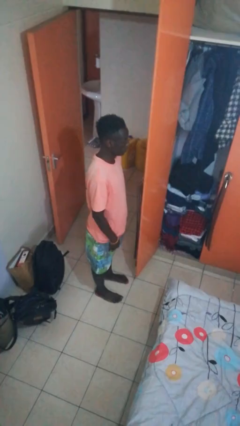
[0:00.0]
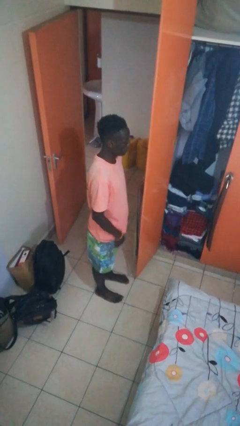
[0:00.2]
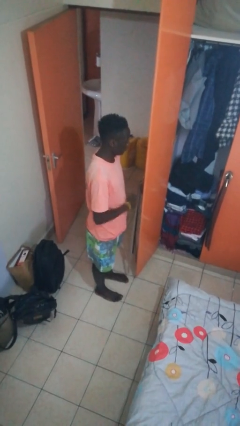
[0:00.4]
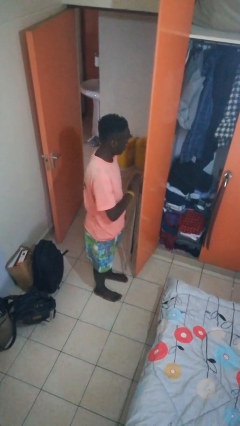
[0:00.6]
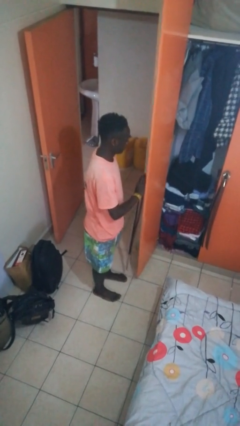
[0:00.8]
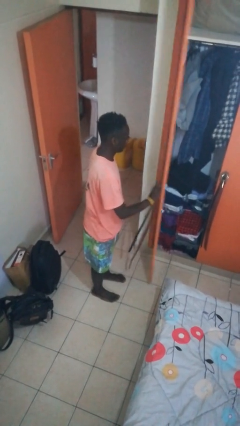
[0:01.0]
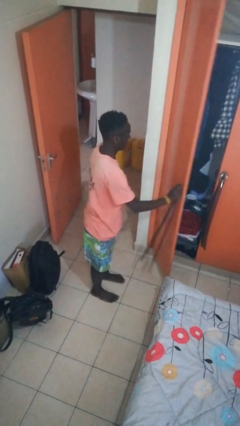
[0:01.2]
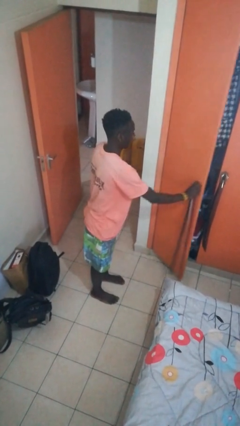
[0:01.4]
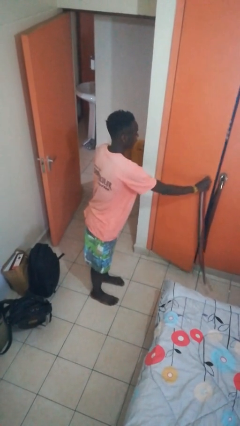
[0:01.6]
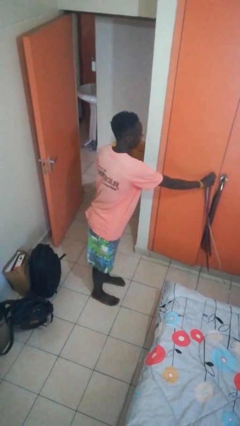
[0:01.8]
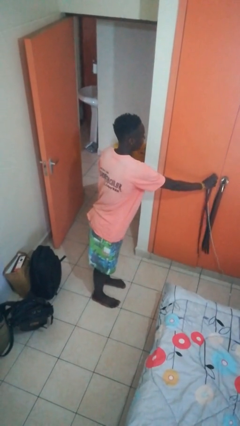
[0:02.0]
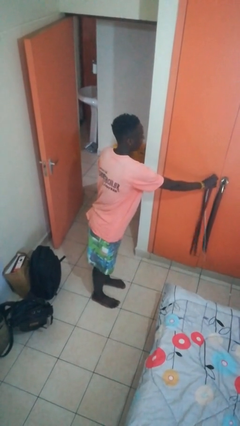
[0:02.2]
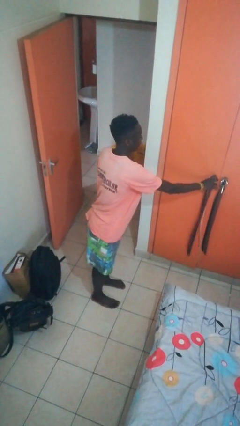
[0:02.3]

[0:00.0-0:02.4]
person closes closet door

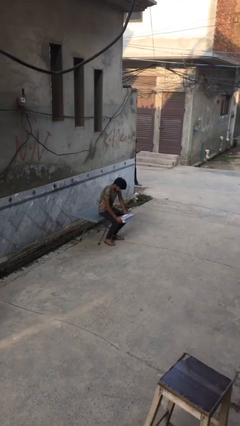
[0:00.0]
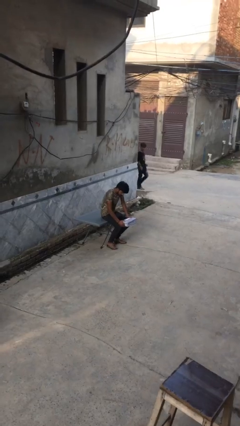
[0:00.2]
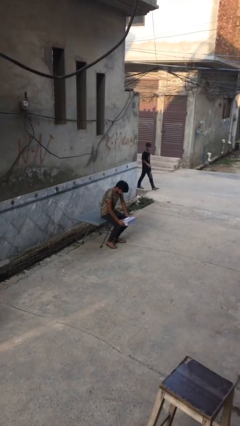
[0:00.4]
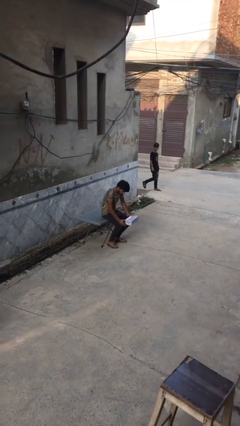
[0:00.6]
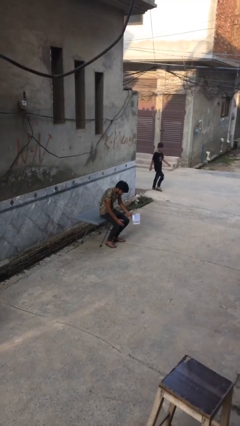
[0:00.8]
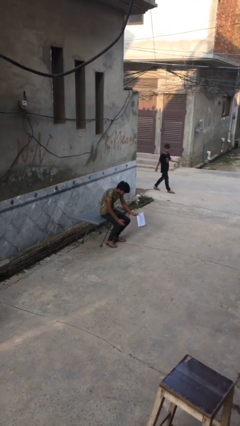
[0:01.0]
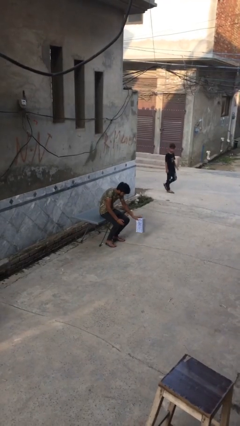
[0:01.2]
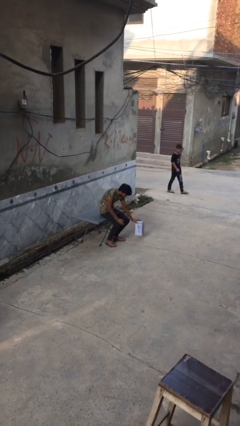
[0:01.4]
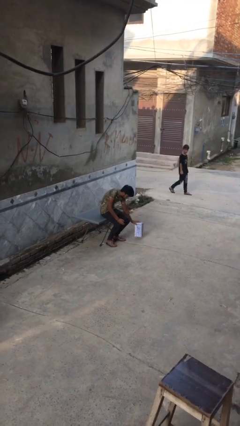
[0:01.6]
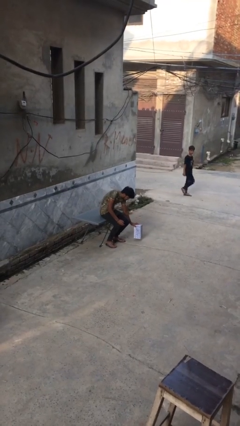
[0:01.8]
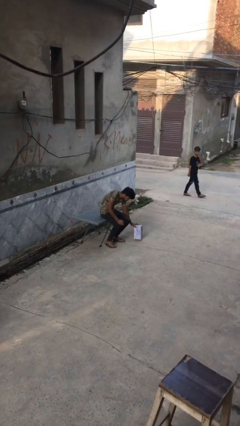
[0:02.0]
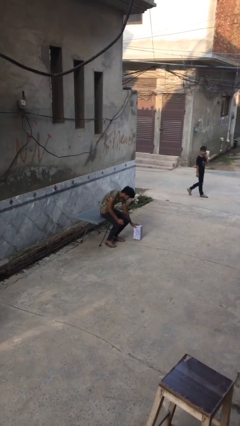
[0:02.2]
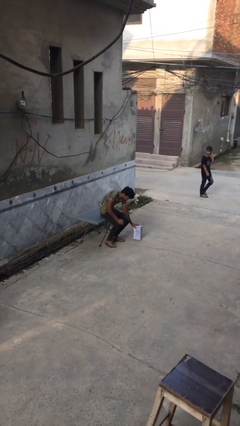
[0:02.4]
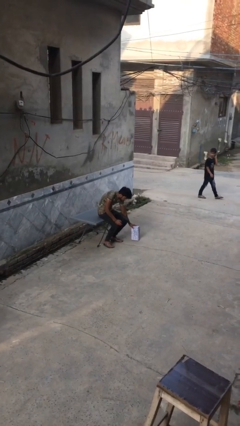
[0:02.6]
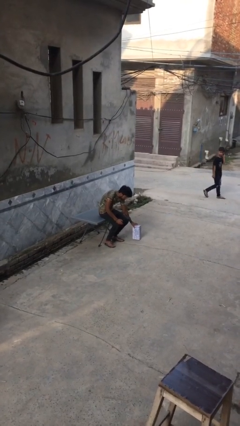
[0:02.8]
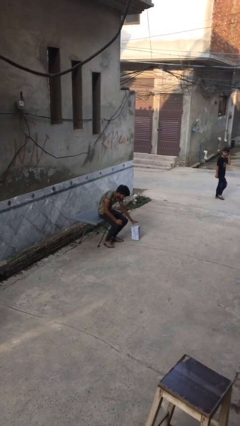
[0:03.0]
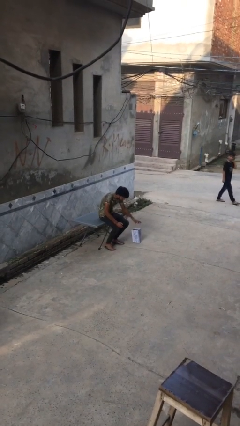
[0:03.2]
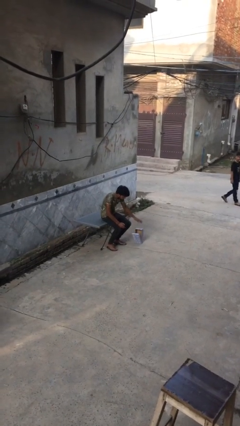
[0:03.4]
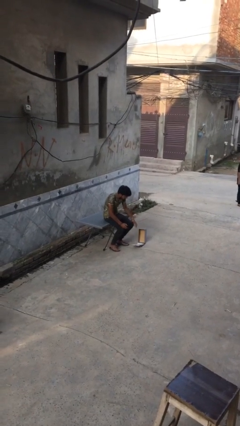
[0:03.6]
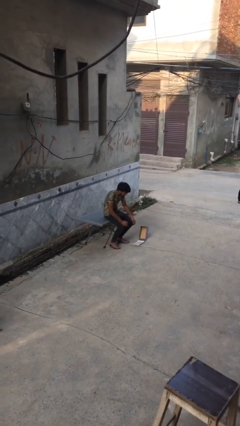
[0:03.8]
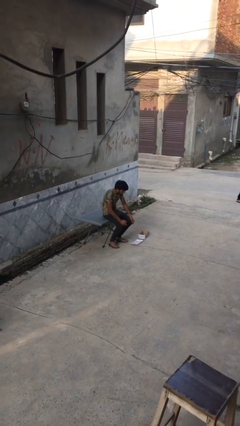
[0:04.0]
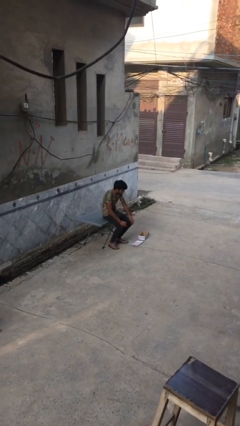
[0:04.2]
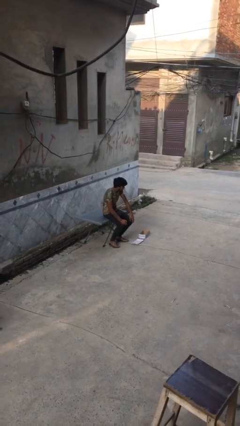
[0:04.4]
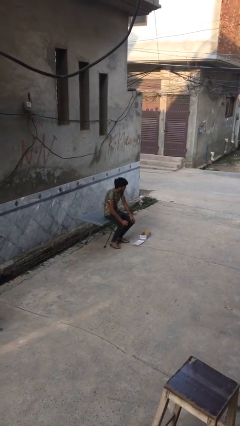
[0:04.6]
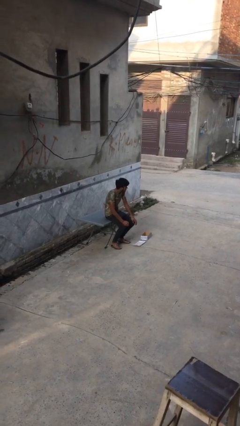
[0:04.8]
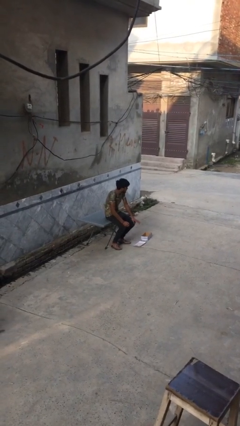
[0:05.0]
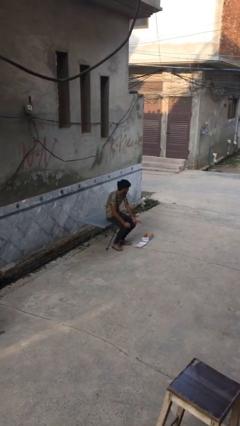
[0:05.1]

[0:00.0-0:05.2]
person puts down object on floor

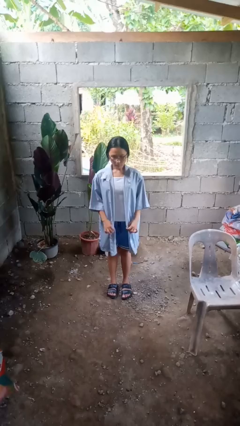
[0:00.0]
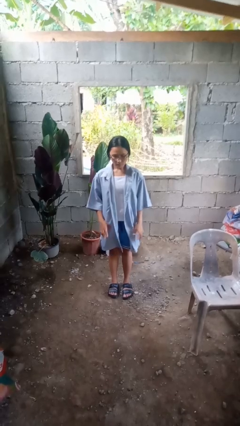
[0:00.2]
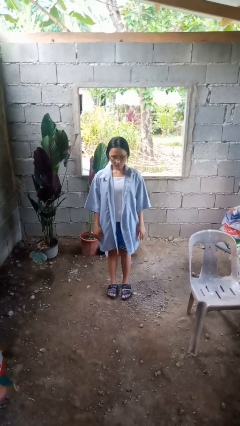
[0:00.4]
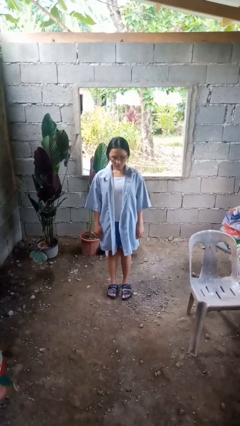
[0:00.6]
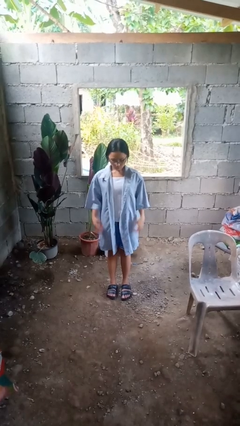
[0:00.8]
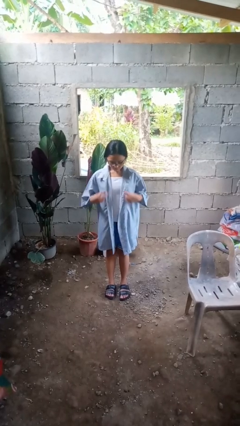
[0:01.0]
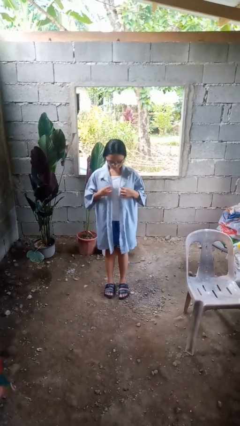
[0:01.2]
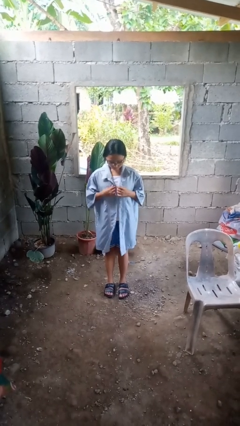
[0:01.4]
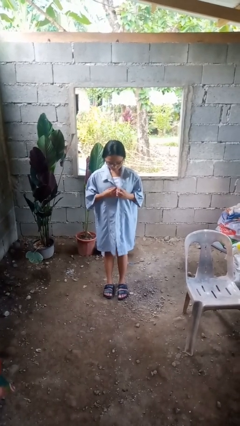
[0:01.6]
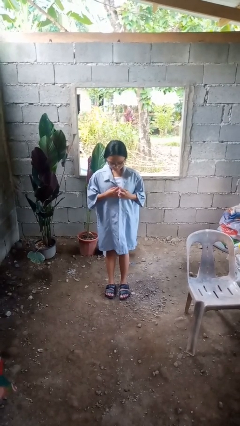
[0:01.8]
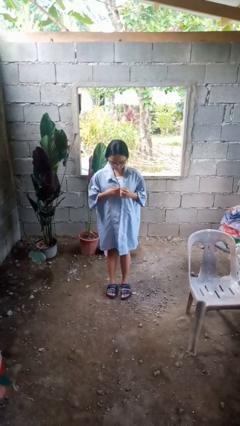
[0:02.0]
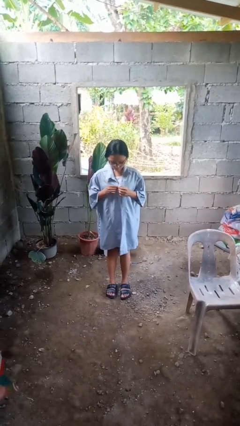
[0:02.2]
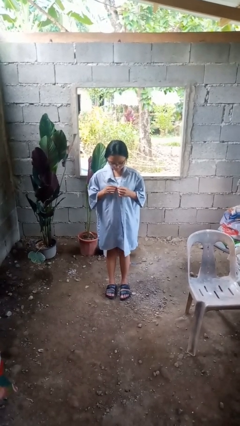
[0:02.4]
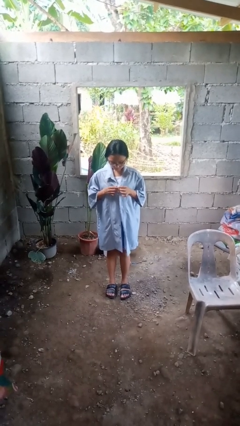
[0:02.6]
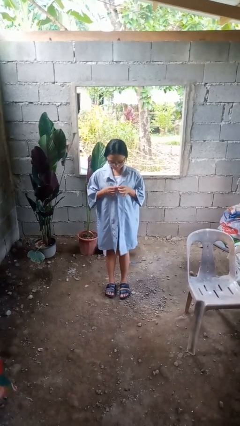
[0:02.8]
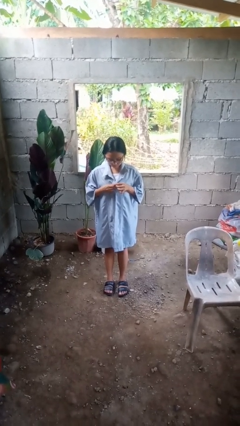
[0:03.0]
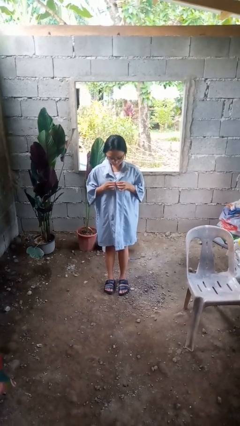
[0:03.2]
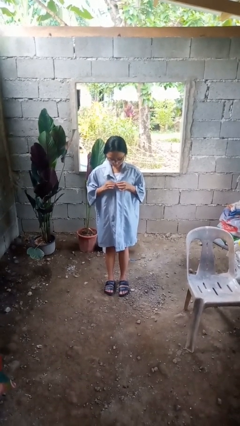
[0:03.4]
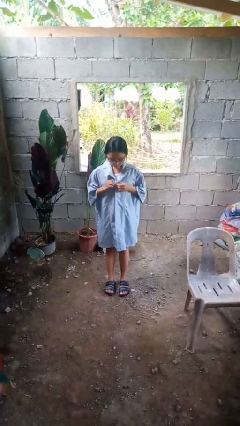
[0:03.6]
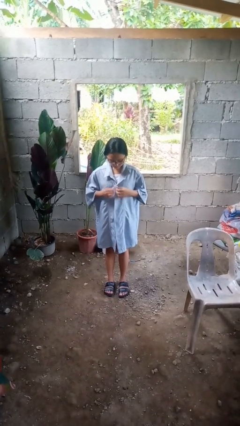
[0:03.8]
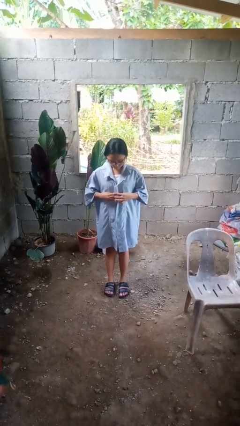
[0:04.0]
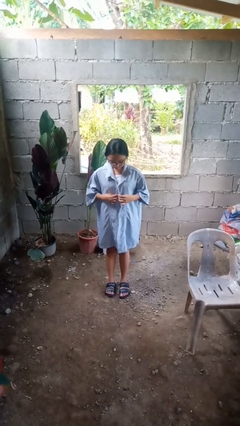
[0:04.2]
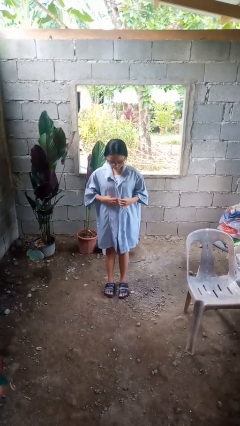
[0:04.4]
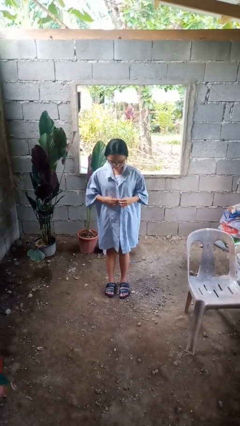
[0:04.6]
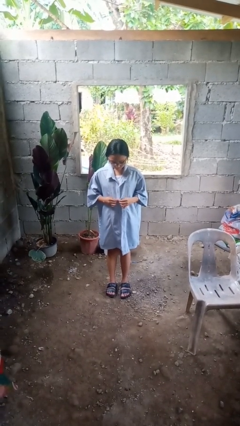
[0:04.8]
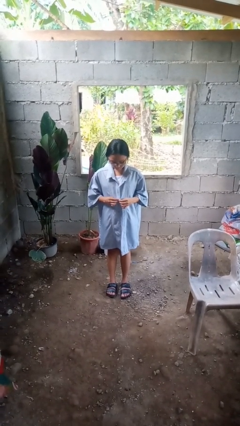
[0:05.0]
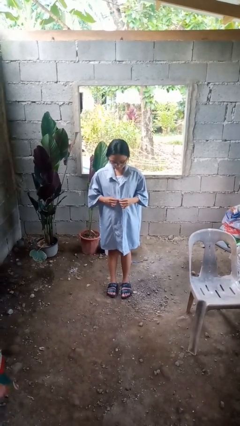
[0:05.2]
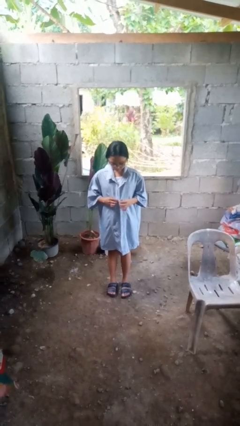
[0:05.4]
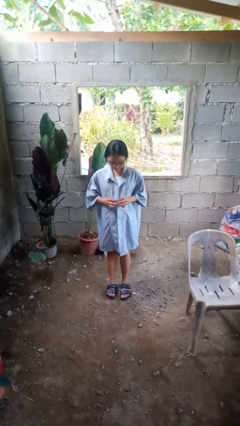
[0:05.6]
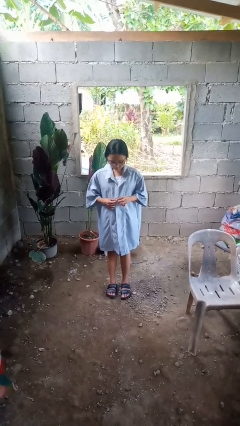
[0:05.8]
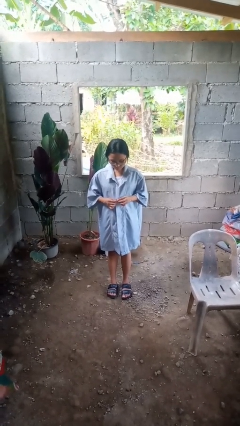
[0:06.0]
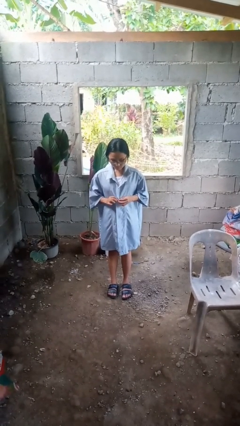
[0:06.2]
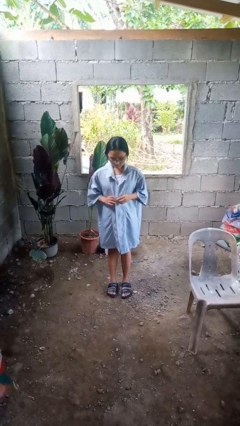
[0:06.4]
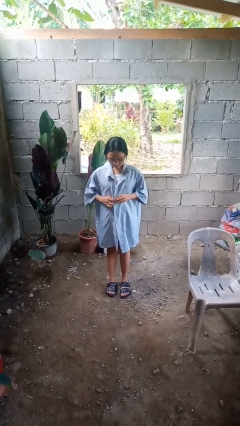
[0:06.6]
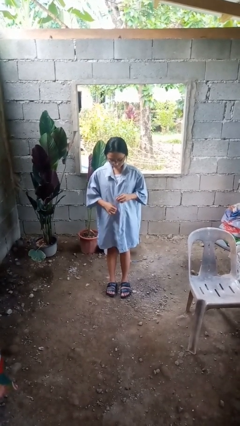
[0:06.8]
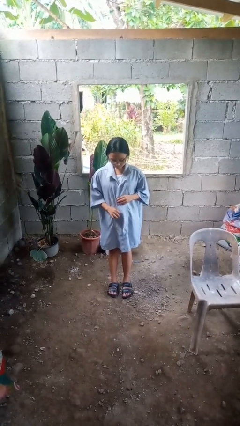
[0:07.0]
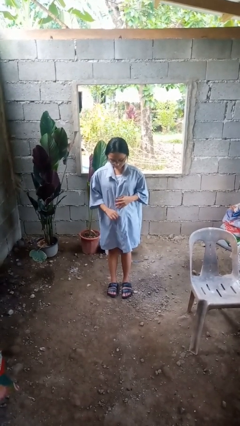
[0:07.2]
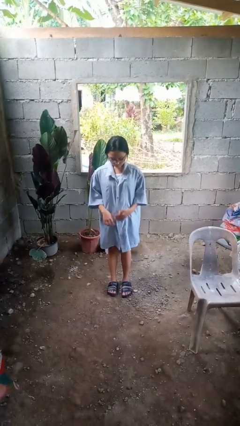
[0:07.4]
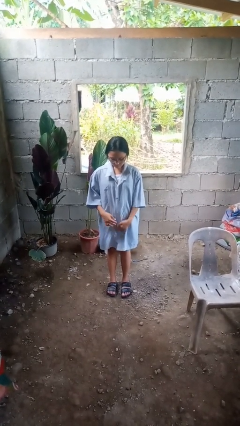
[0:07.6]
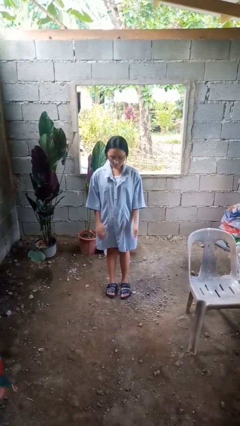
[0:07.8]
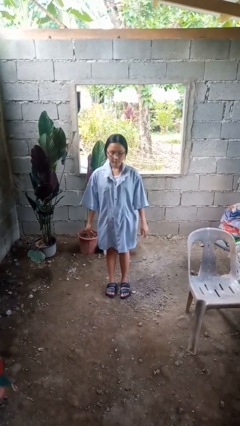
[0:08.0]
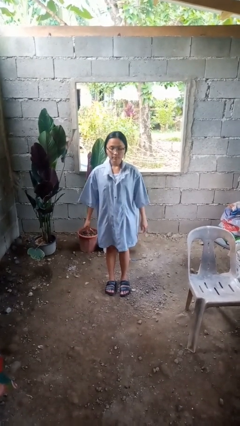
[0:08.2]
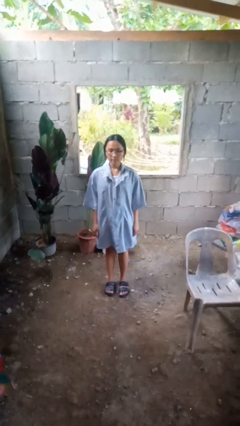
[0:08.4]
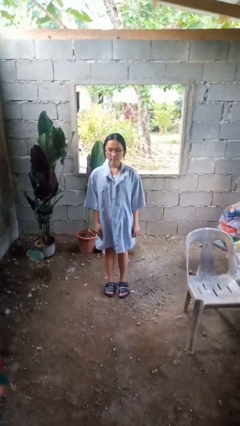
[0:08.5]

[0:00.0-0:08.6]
person buttons shirt

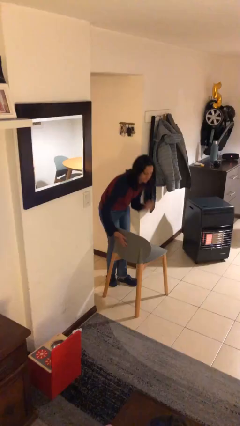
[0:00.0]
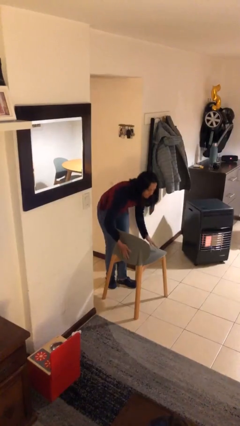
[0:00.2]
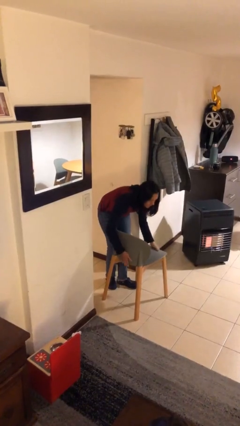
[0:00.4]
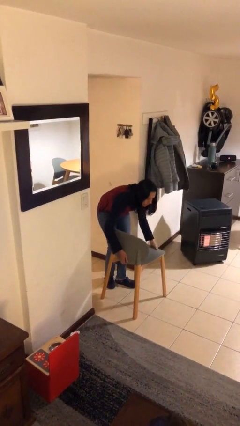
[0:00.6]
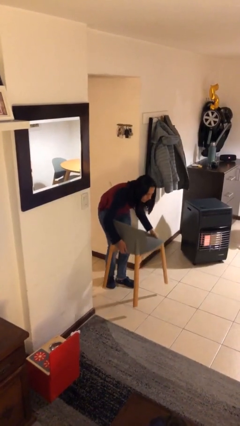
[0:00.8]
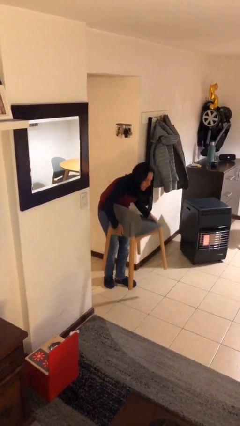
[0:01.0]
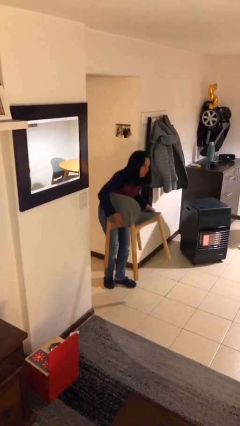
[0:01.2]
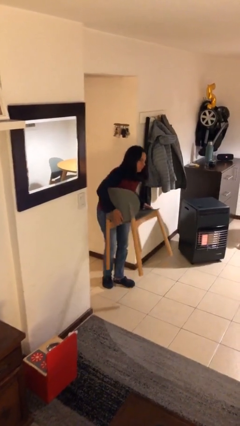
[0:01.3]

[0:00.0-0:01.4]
person picks up object from floor
